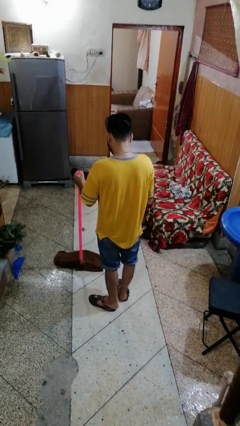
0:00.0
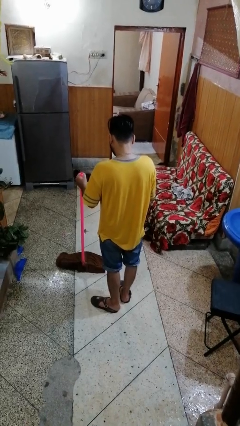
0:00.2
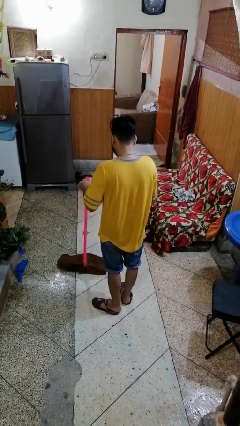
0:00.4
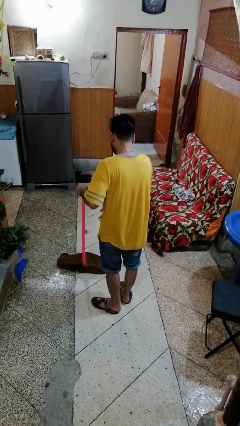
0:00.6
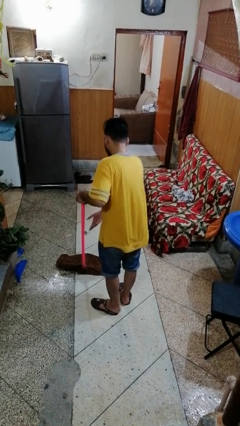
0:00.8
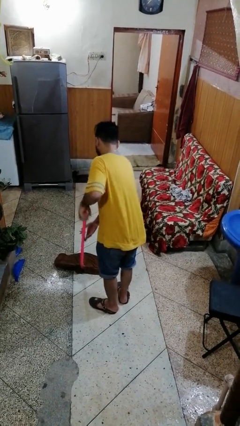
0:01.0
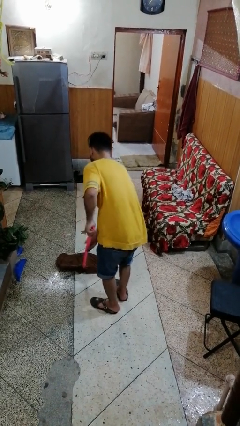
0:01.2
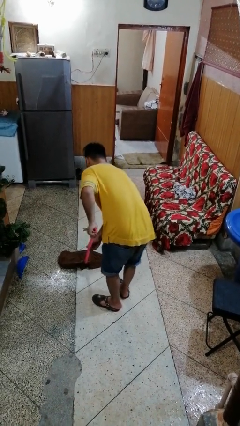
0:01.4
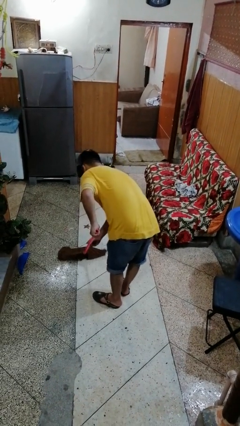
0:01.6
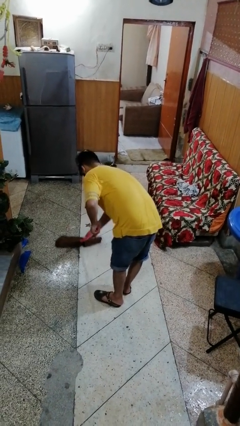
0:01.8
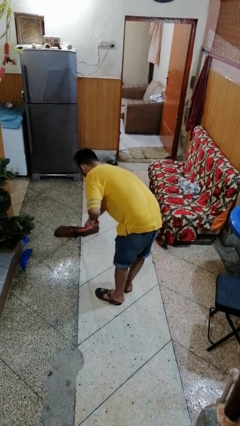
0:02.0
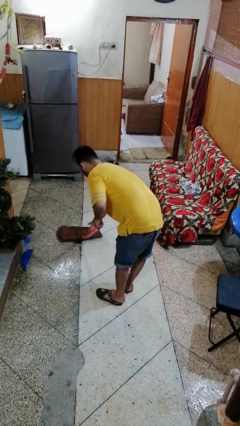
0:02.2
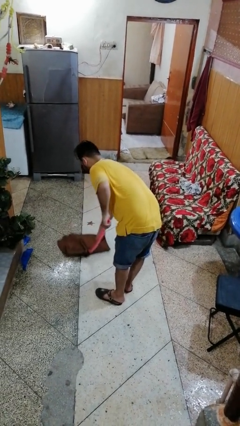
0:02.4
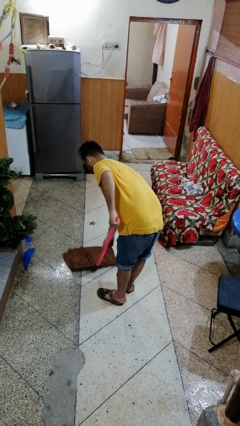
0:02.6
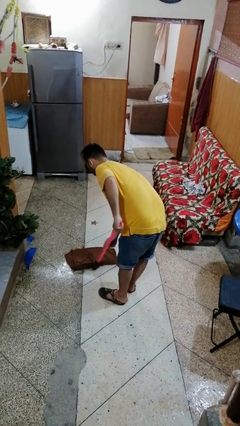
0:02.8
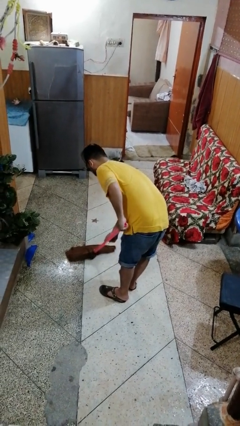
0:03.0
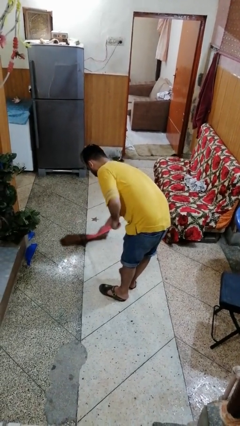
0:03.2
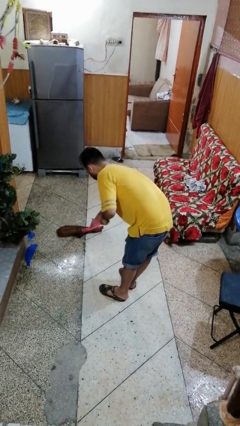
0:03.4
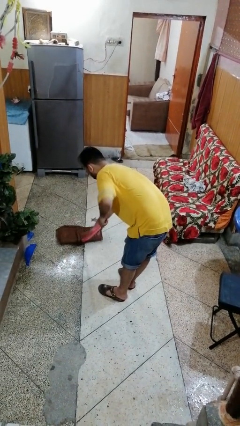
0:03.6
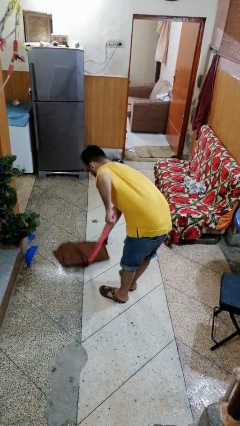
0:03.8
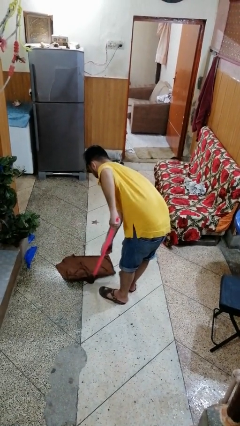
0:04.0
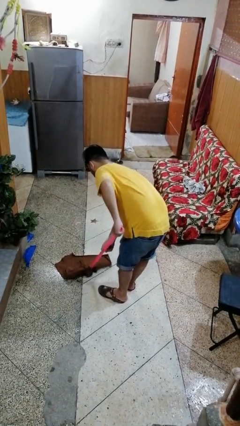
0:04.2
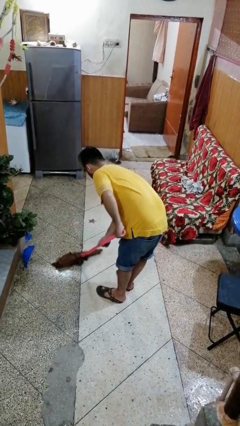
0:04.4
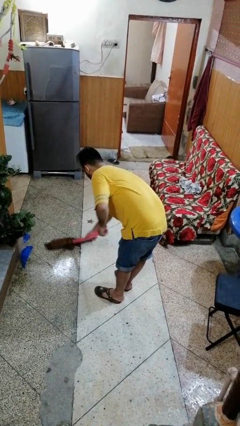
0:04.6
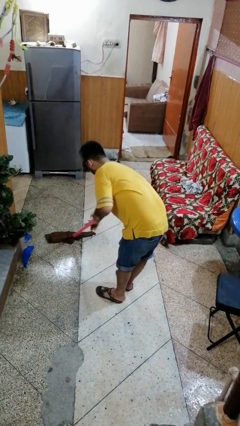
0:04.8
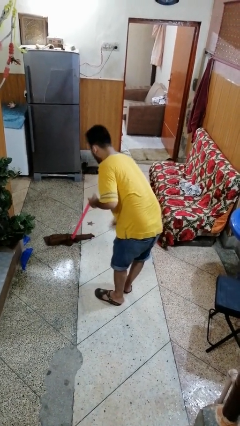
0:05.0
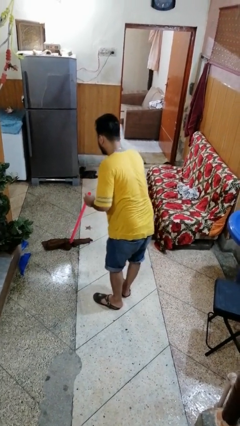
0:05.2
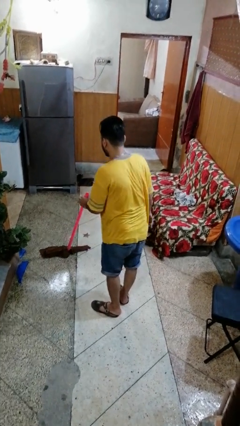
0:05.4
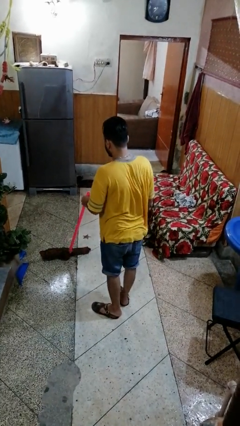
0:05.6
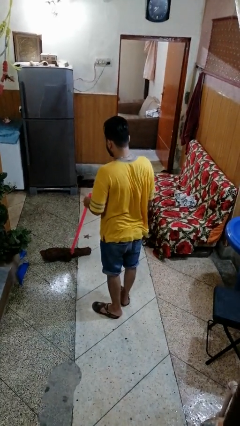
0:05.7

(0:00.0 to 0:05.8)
person mops

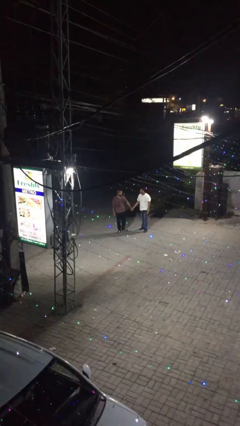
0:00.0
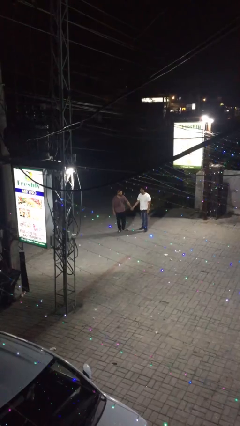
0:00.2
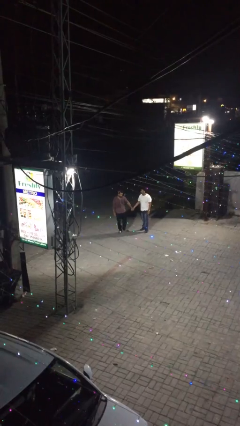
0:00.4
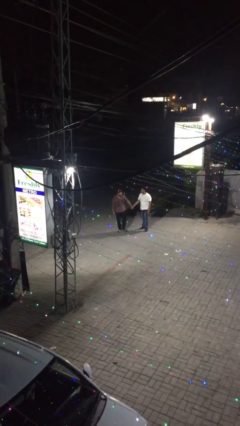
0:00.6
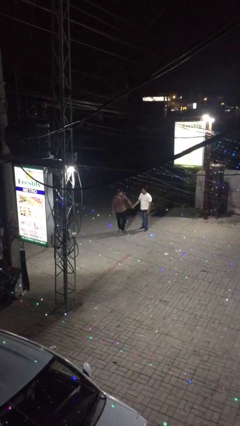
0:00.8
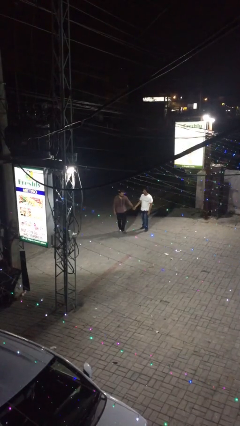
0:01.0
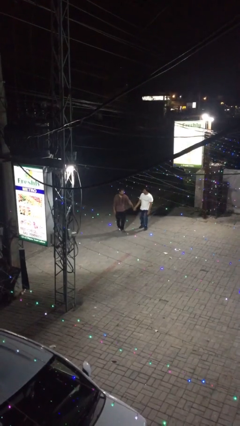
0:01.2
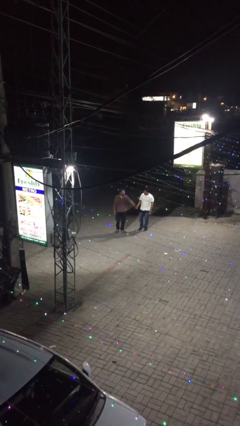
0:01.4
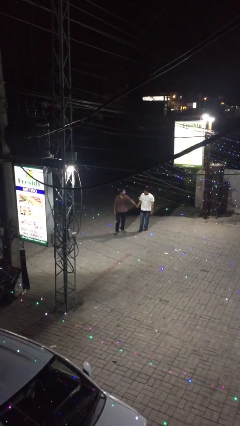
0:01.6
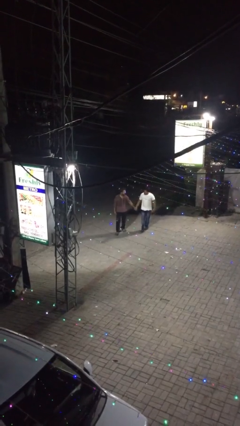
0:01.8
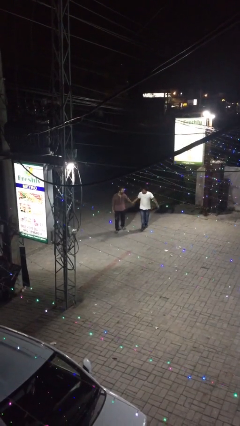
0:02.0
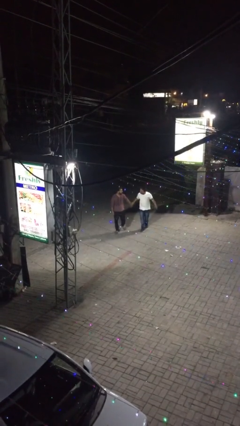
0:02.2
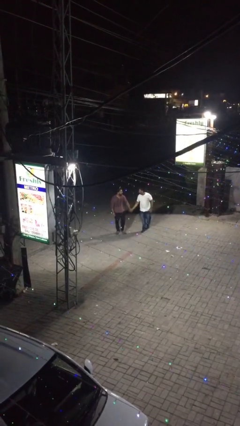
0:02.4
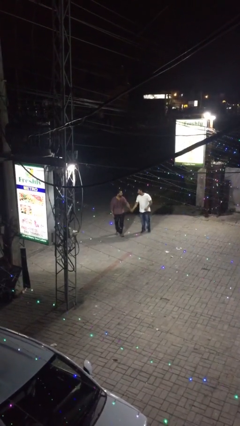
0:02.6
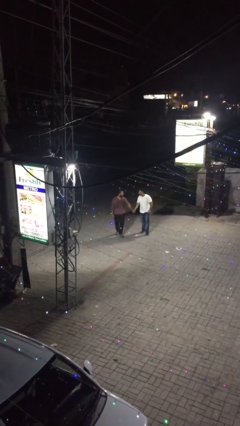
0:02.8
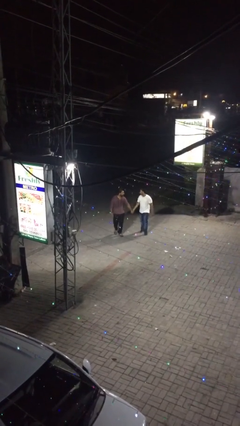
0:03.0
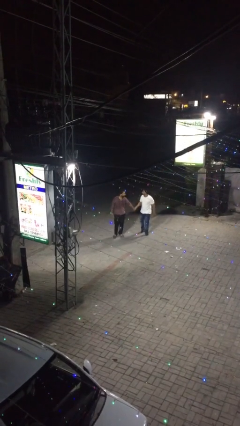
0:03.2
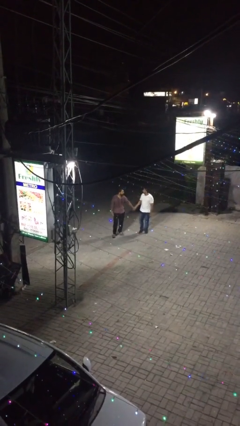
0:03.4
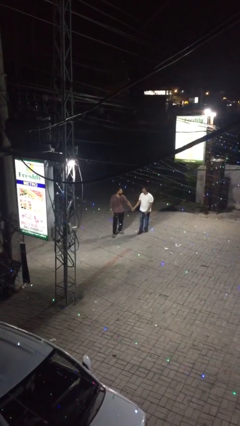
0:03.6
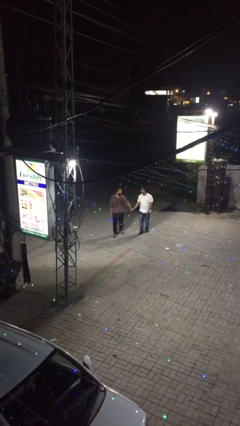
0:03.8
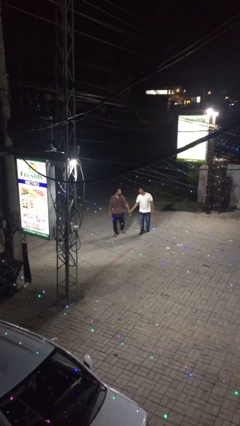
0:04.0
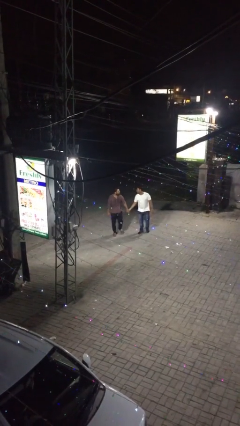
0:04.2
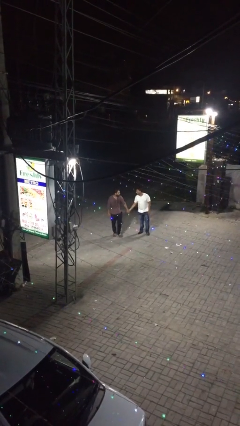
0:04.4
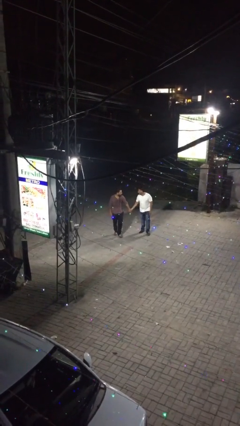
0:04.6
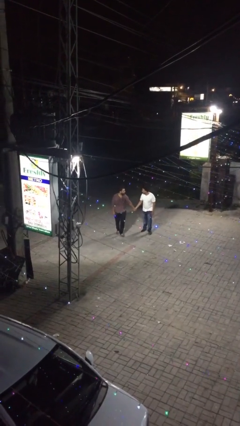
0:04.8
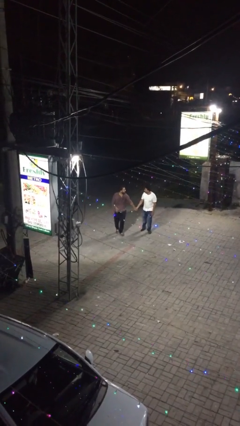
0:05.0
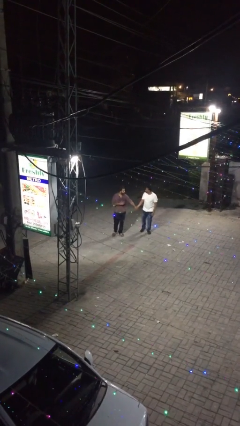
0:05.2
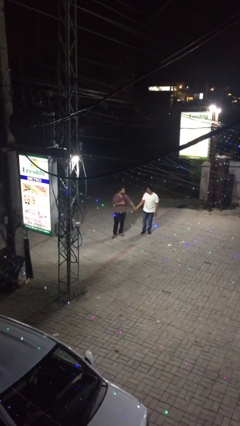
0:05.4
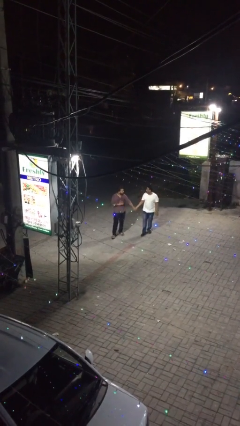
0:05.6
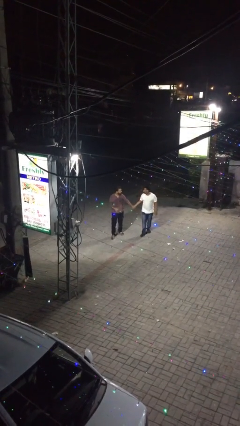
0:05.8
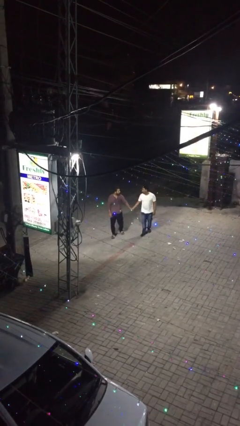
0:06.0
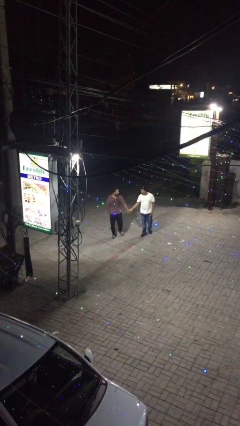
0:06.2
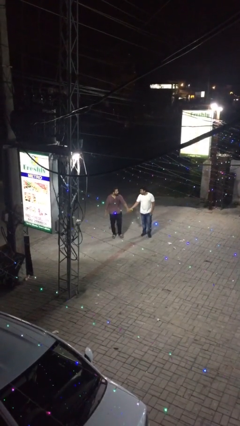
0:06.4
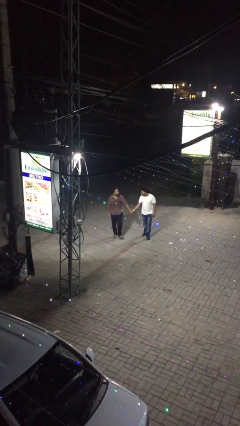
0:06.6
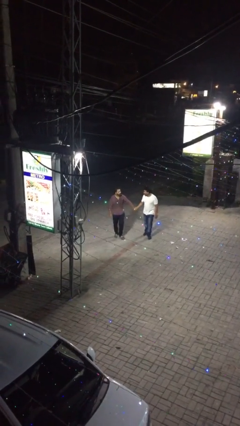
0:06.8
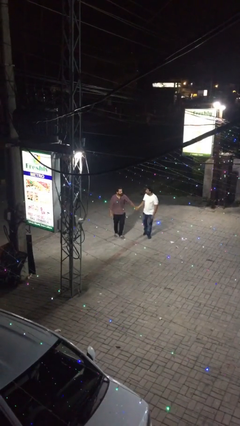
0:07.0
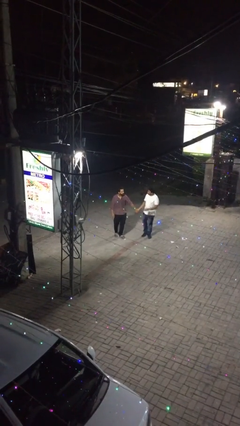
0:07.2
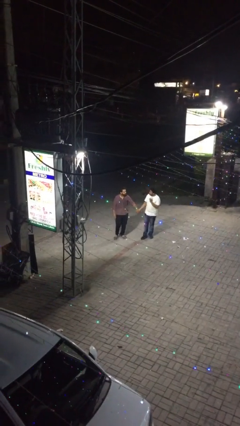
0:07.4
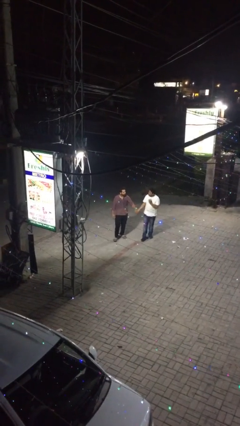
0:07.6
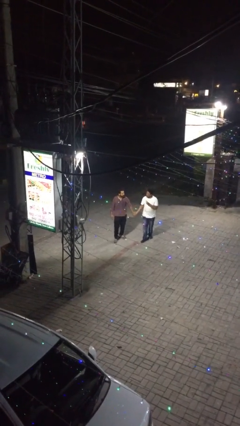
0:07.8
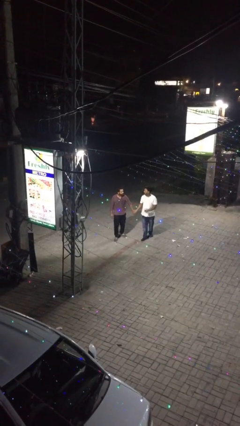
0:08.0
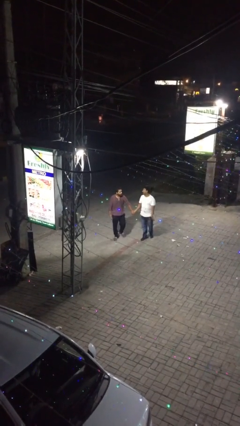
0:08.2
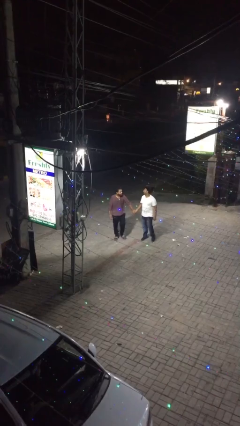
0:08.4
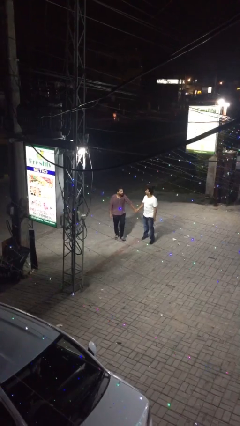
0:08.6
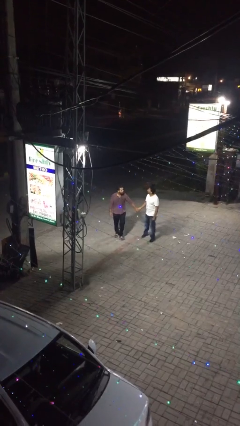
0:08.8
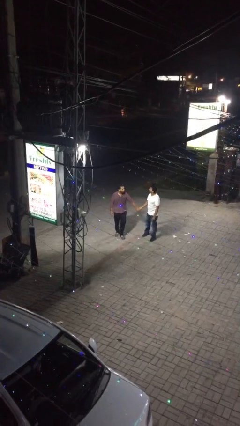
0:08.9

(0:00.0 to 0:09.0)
person holds hand

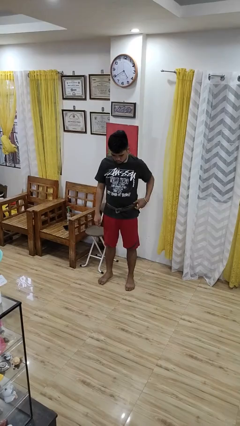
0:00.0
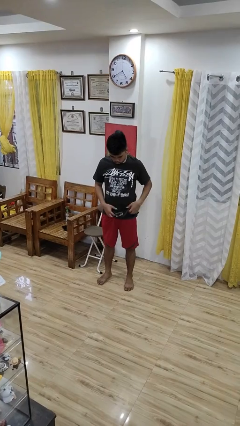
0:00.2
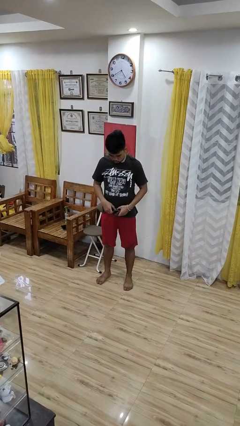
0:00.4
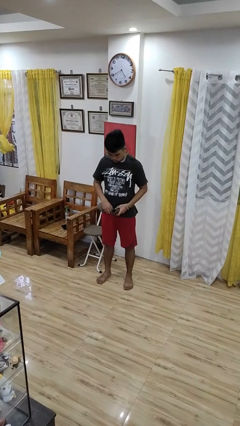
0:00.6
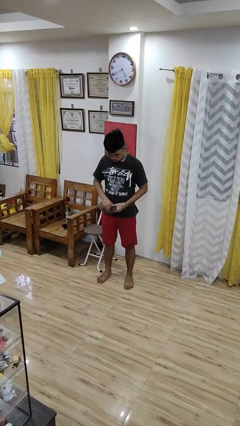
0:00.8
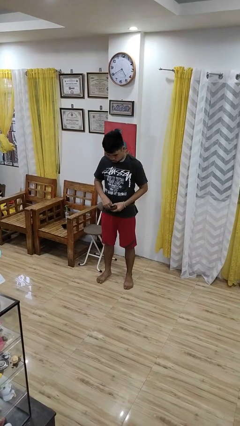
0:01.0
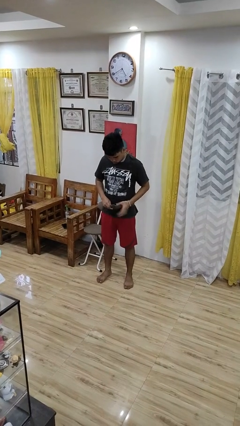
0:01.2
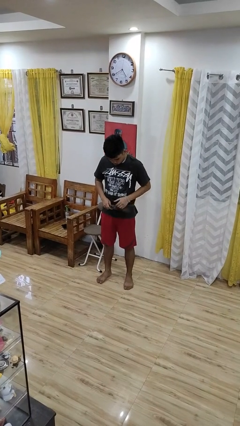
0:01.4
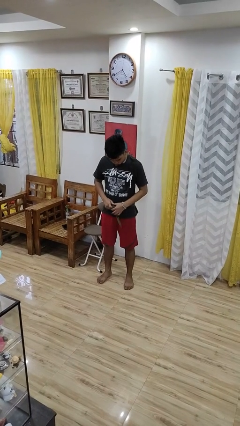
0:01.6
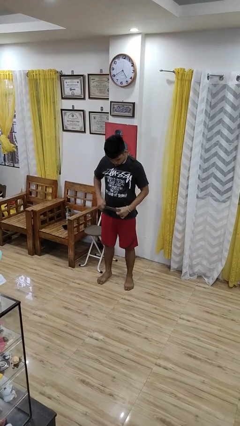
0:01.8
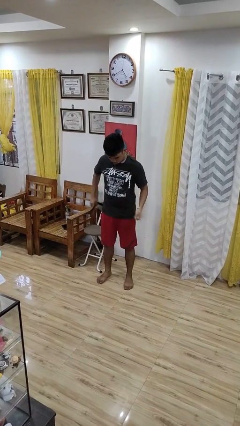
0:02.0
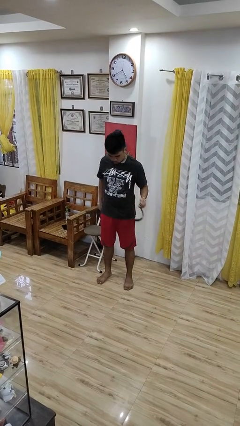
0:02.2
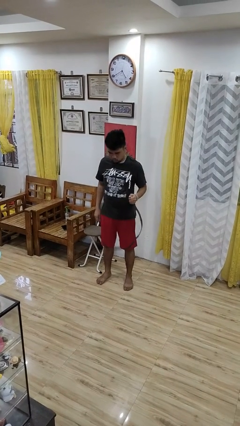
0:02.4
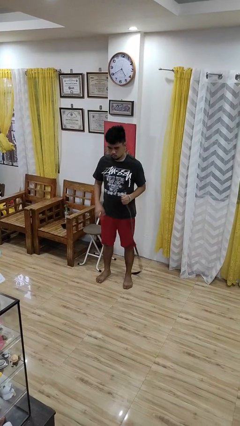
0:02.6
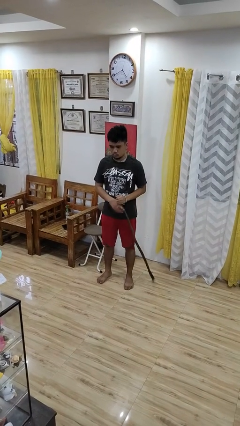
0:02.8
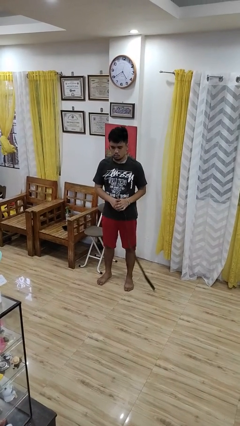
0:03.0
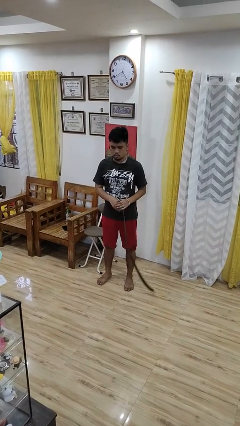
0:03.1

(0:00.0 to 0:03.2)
person takes off belt
